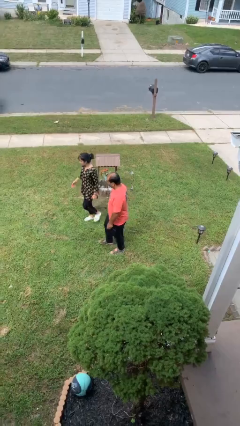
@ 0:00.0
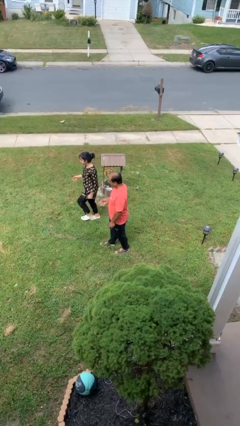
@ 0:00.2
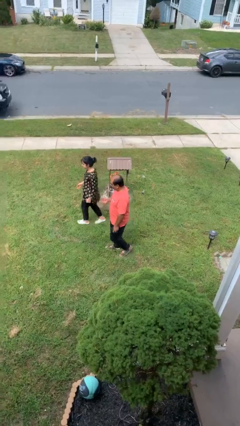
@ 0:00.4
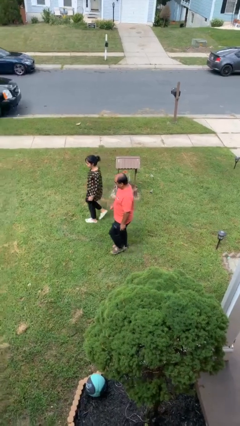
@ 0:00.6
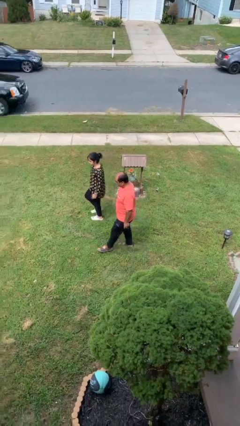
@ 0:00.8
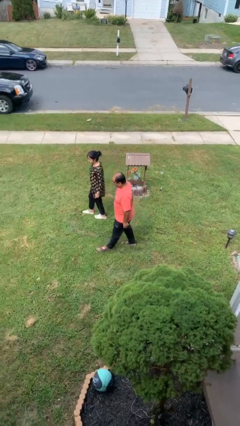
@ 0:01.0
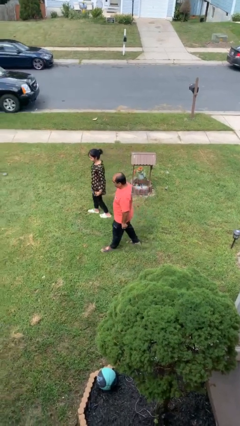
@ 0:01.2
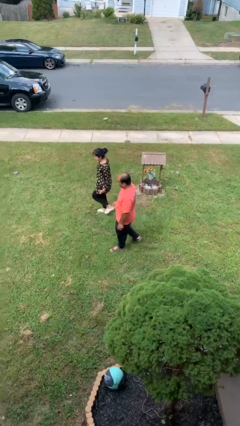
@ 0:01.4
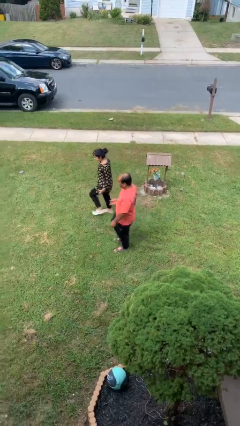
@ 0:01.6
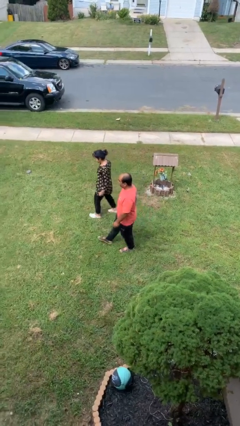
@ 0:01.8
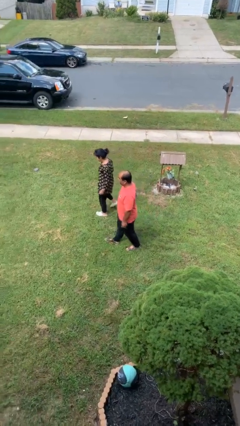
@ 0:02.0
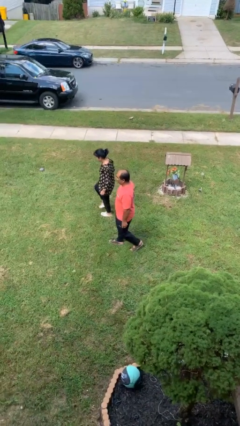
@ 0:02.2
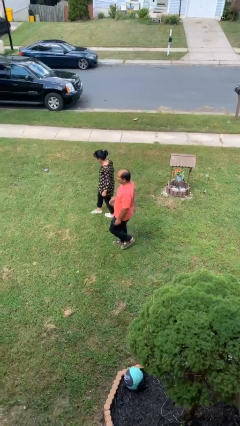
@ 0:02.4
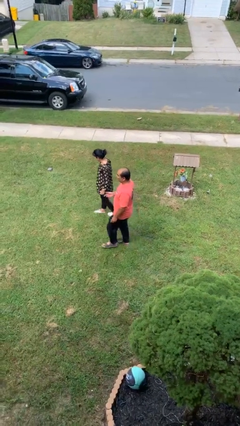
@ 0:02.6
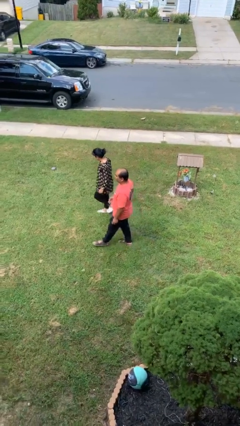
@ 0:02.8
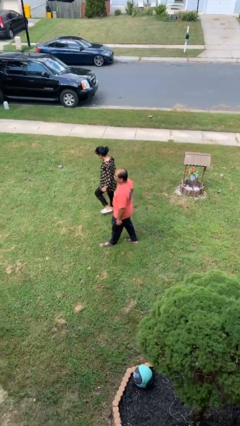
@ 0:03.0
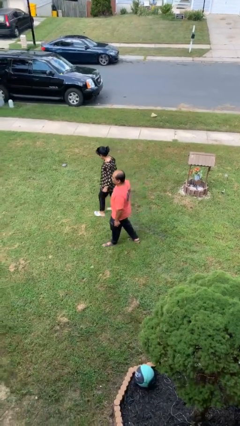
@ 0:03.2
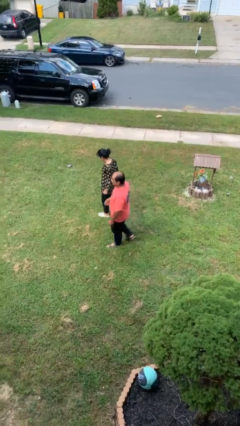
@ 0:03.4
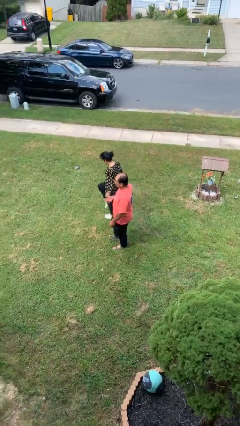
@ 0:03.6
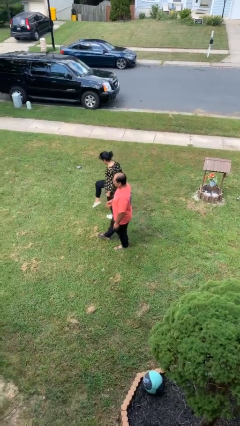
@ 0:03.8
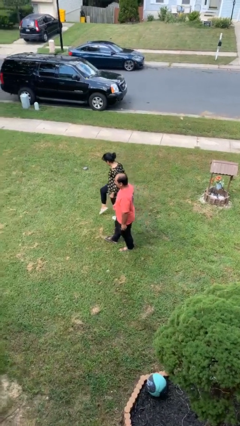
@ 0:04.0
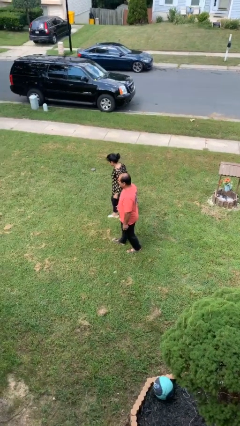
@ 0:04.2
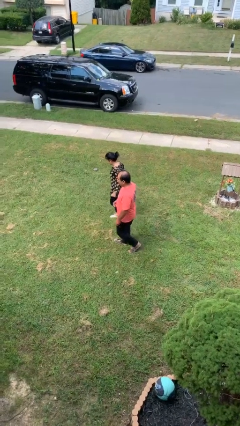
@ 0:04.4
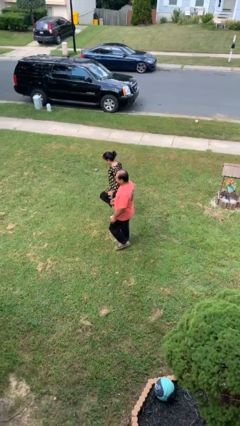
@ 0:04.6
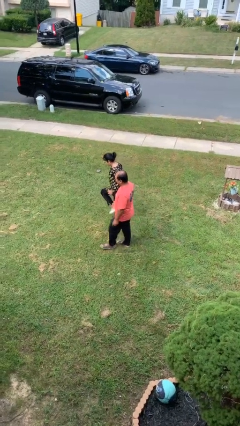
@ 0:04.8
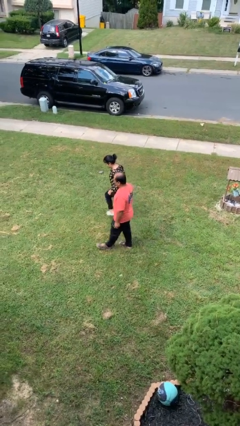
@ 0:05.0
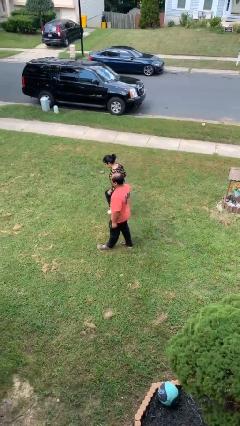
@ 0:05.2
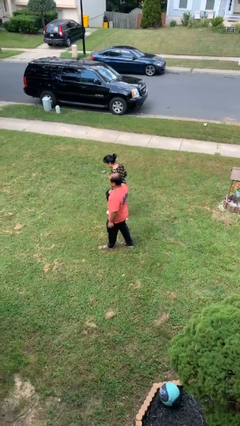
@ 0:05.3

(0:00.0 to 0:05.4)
person talks to person

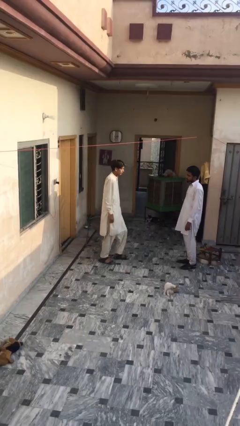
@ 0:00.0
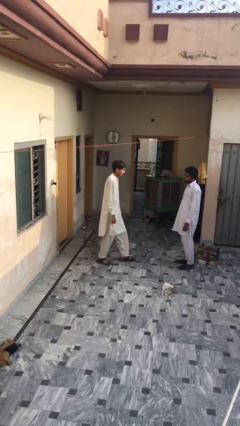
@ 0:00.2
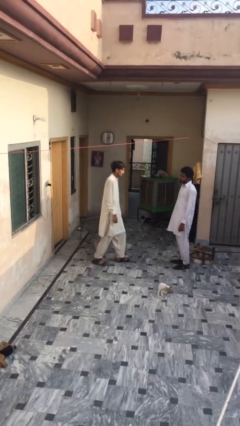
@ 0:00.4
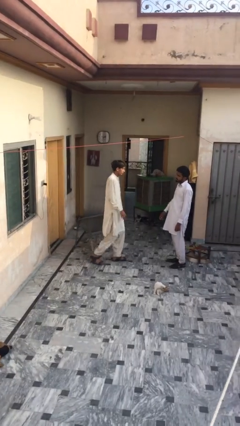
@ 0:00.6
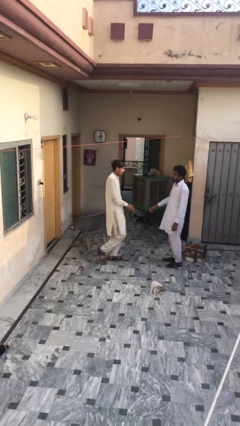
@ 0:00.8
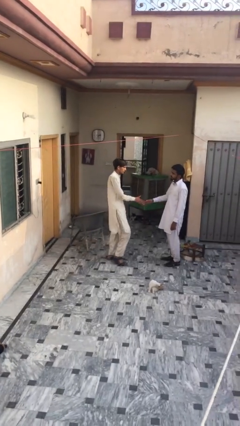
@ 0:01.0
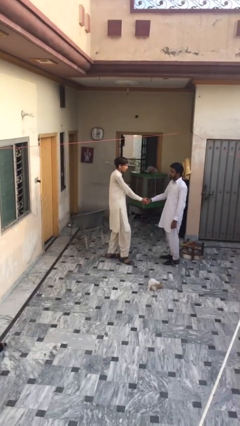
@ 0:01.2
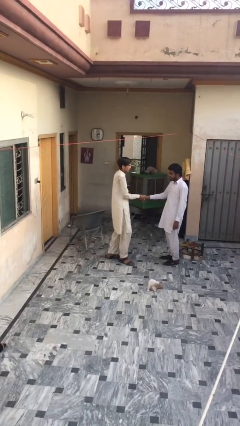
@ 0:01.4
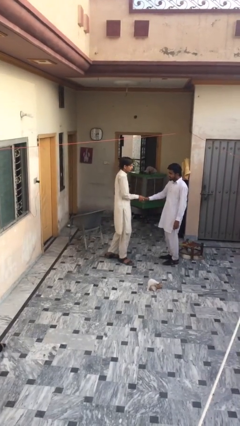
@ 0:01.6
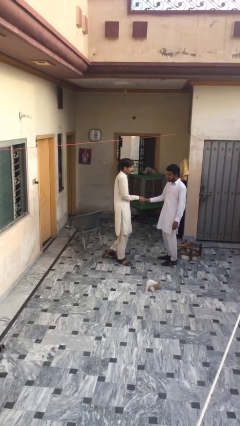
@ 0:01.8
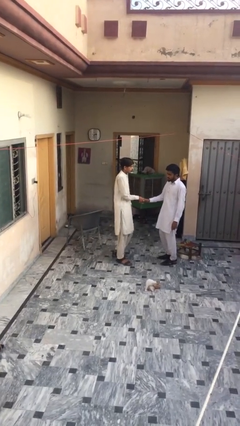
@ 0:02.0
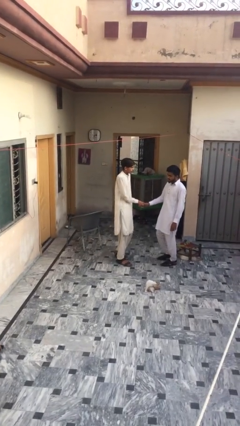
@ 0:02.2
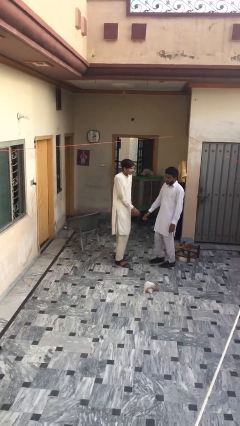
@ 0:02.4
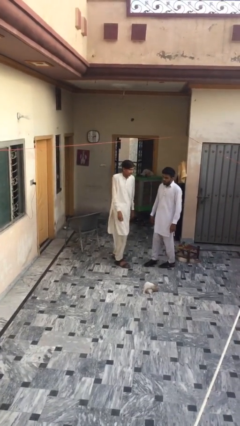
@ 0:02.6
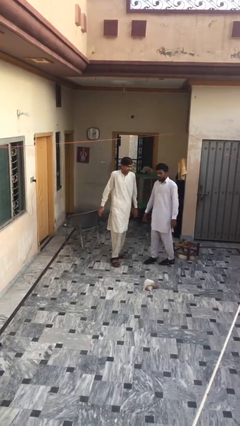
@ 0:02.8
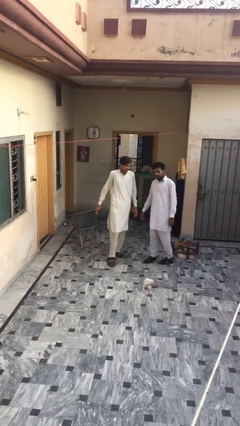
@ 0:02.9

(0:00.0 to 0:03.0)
person shakes hand

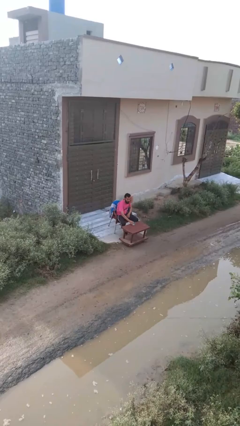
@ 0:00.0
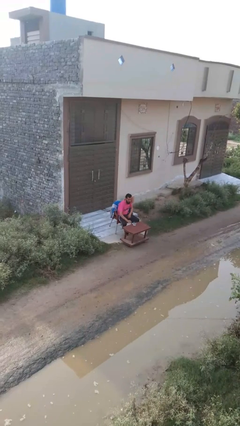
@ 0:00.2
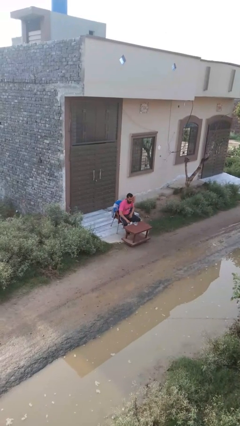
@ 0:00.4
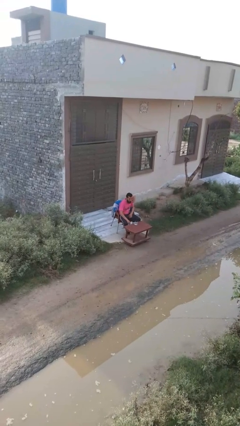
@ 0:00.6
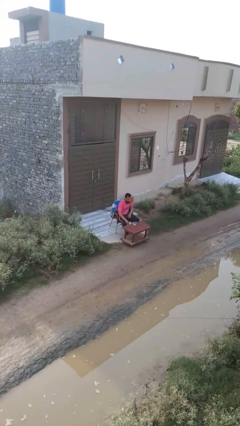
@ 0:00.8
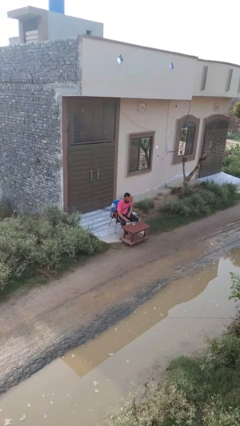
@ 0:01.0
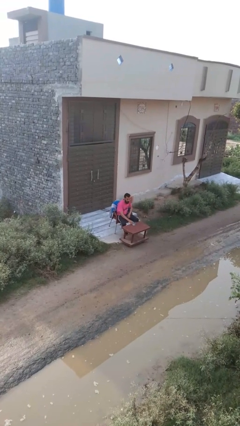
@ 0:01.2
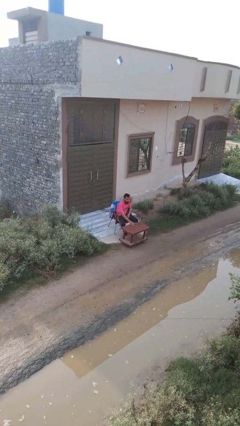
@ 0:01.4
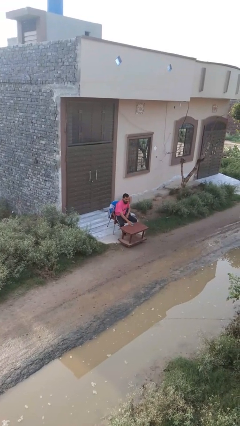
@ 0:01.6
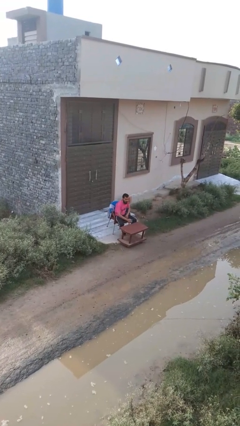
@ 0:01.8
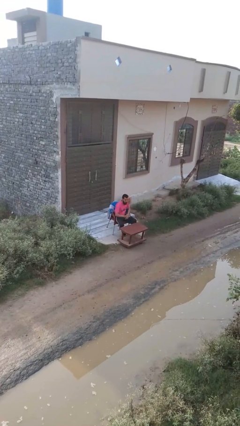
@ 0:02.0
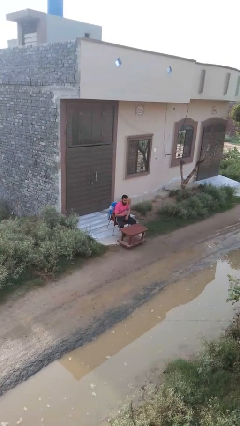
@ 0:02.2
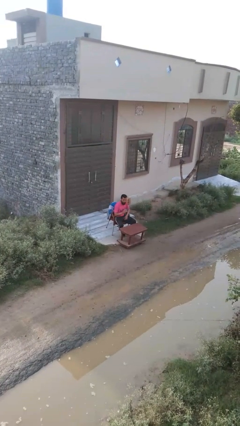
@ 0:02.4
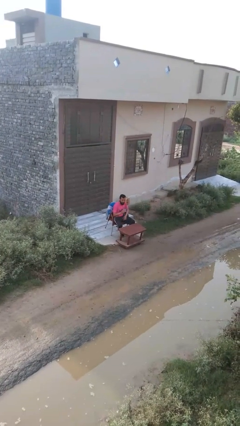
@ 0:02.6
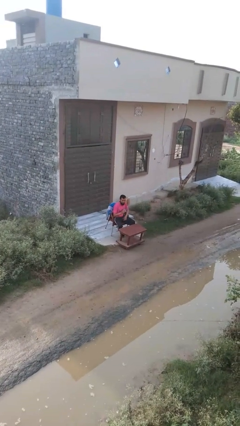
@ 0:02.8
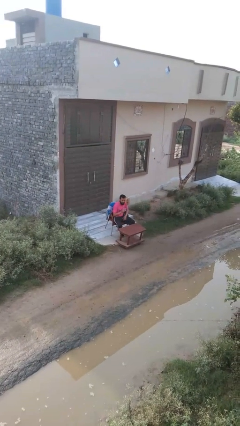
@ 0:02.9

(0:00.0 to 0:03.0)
person picks up object from table

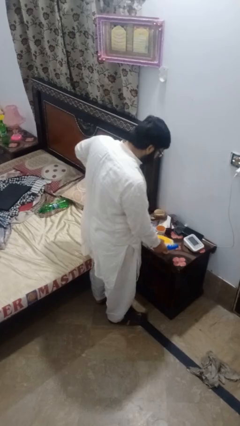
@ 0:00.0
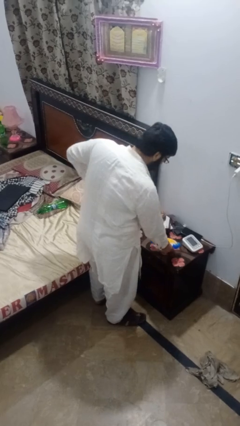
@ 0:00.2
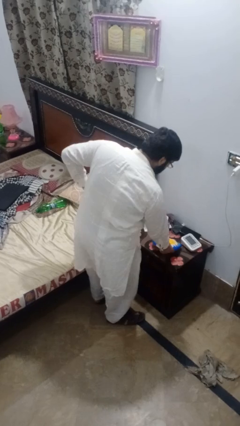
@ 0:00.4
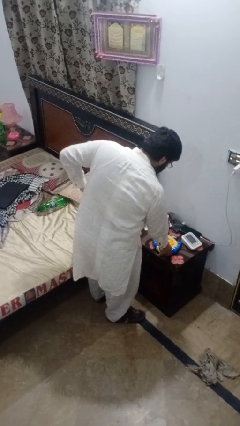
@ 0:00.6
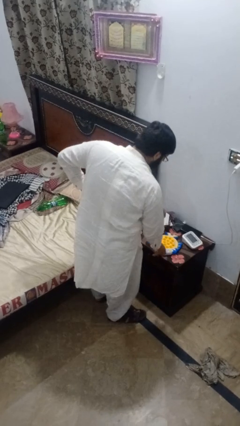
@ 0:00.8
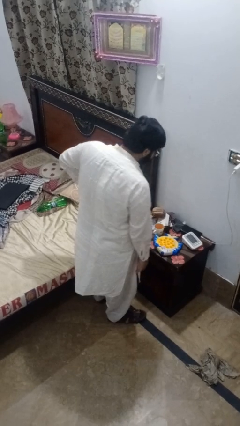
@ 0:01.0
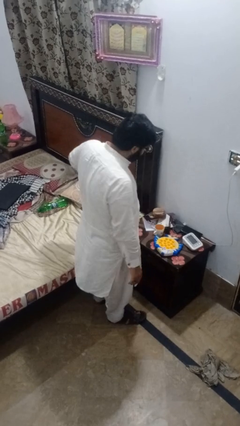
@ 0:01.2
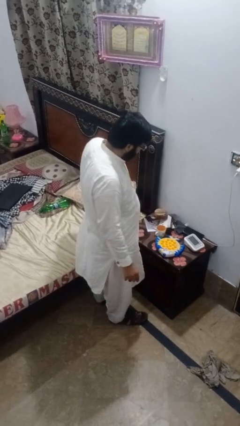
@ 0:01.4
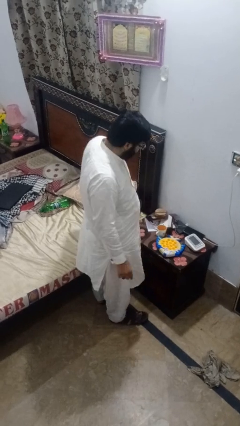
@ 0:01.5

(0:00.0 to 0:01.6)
person puts down object on countertop

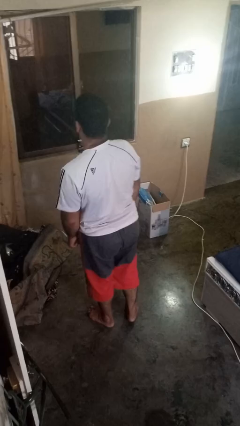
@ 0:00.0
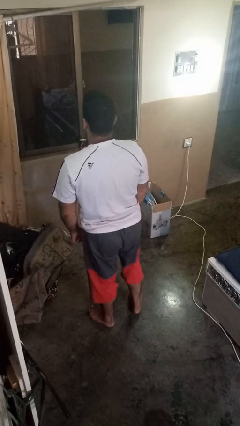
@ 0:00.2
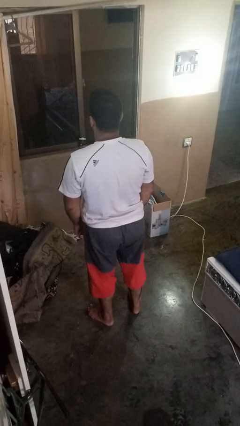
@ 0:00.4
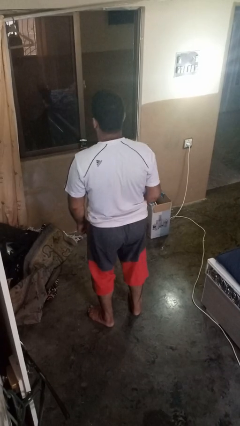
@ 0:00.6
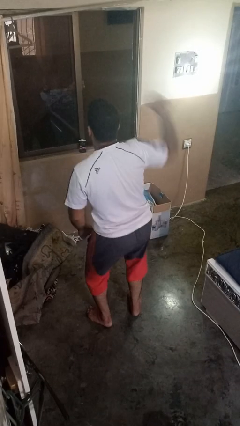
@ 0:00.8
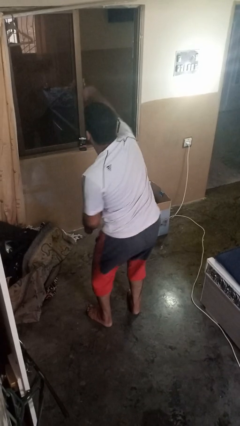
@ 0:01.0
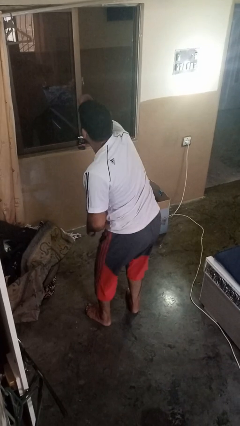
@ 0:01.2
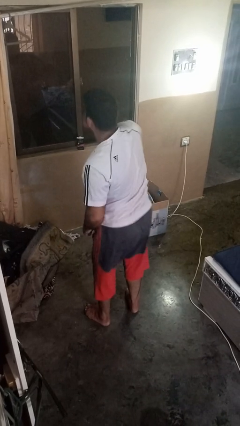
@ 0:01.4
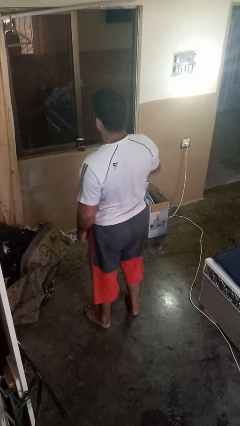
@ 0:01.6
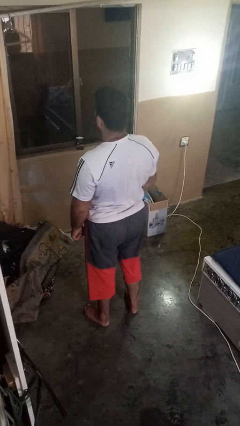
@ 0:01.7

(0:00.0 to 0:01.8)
person karate chop

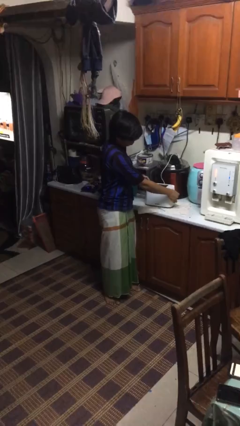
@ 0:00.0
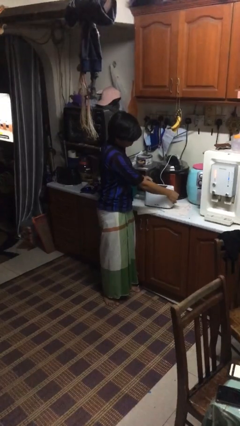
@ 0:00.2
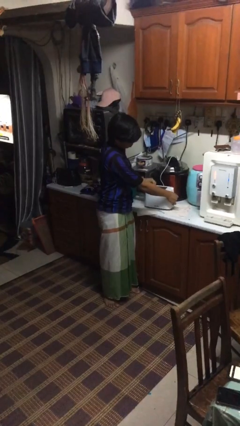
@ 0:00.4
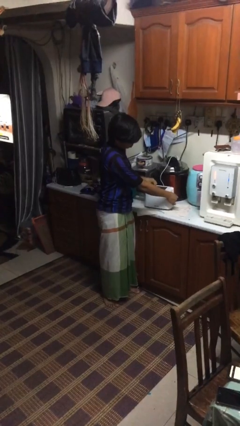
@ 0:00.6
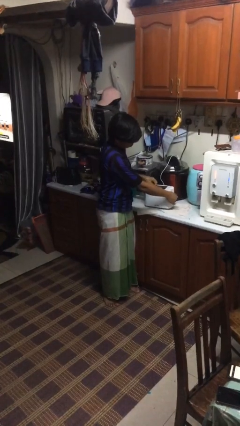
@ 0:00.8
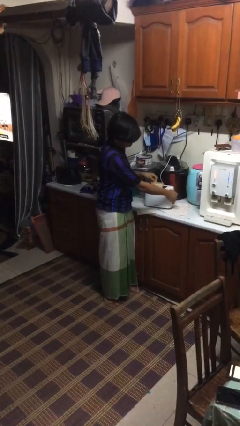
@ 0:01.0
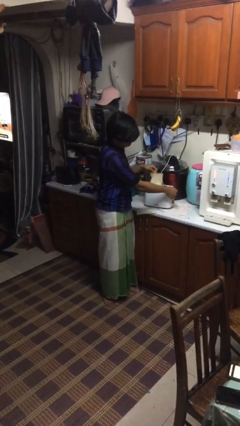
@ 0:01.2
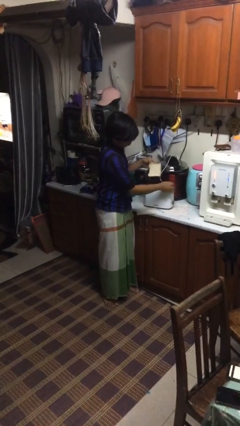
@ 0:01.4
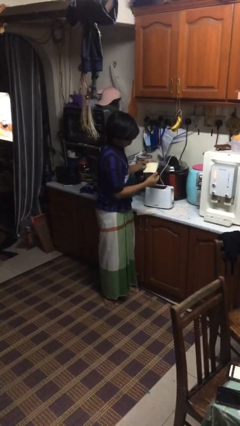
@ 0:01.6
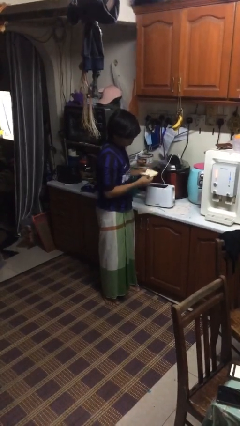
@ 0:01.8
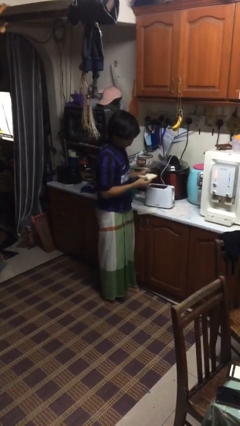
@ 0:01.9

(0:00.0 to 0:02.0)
person takes object from toaster

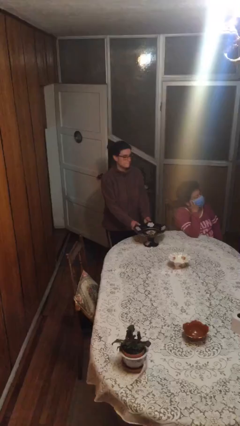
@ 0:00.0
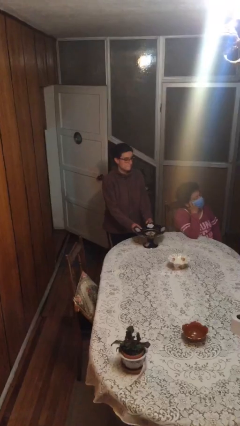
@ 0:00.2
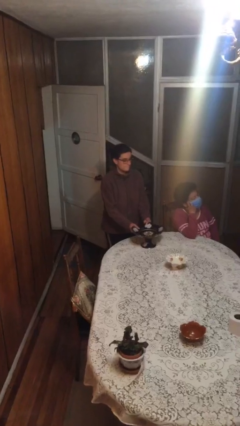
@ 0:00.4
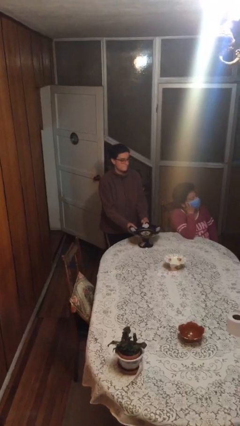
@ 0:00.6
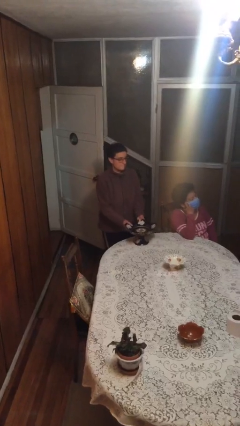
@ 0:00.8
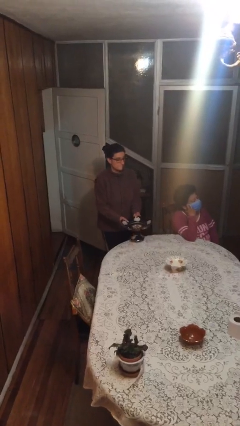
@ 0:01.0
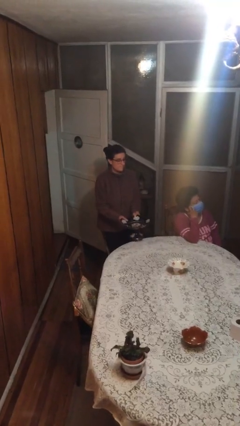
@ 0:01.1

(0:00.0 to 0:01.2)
person steals object from person
